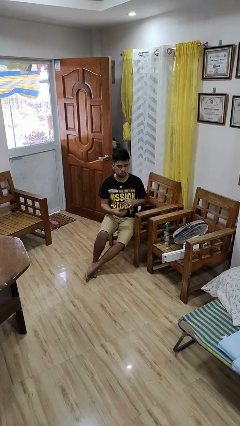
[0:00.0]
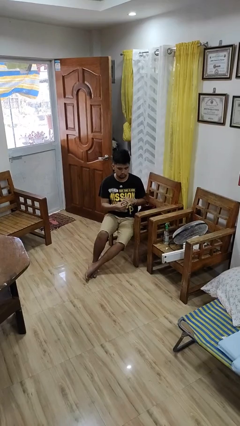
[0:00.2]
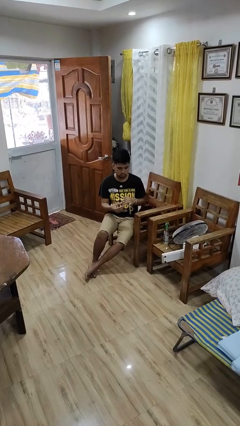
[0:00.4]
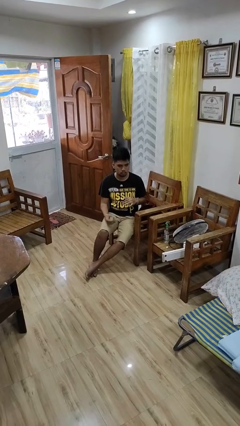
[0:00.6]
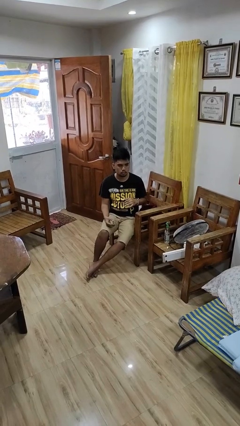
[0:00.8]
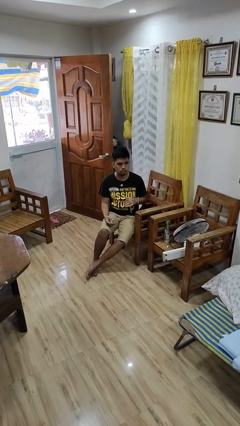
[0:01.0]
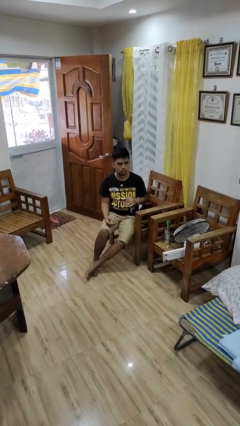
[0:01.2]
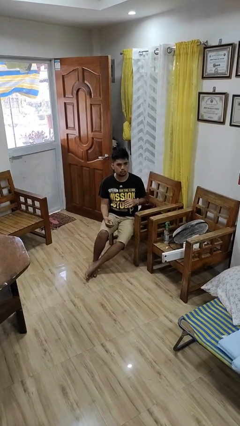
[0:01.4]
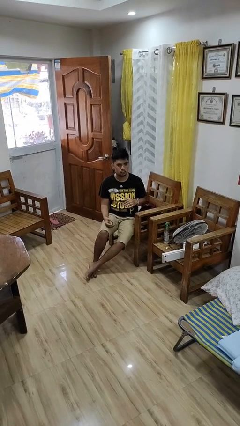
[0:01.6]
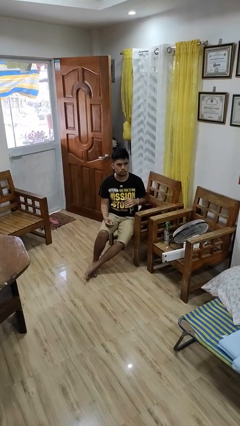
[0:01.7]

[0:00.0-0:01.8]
person takes off ring

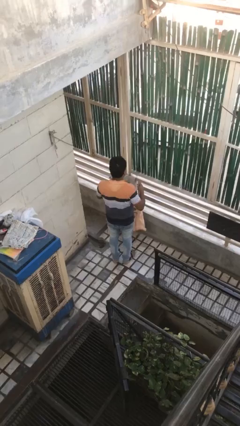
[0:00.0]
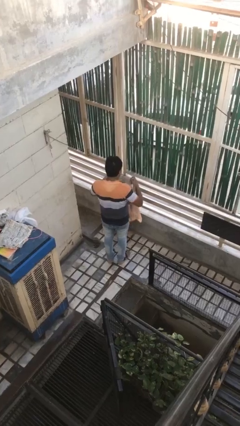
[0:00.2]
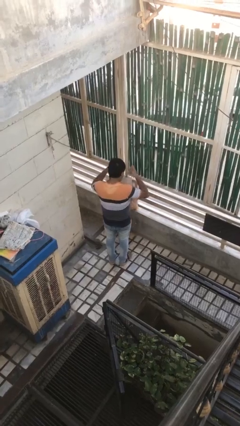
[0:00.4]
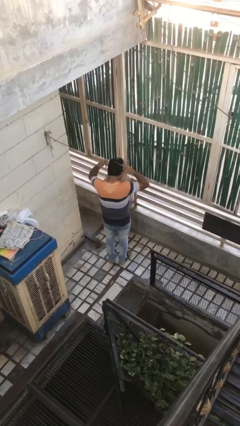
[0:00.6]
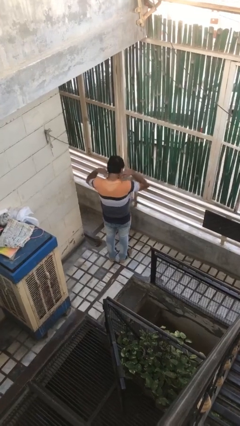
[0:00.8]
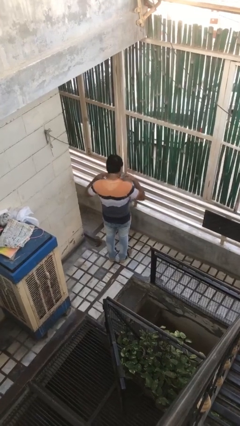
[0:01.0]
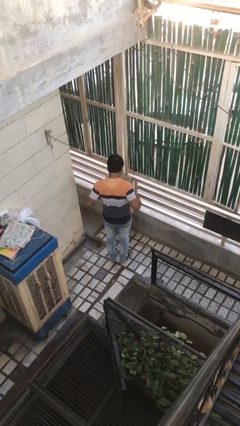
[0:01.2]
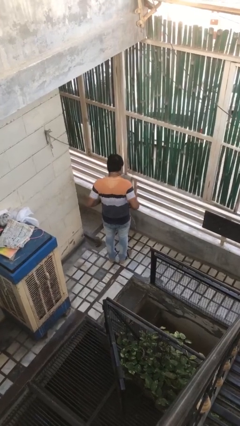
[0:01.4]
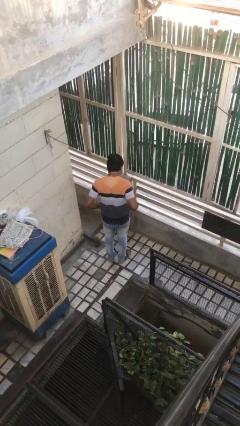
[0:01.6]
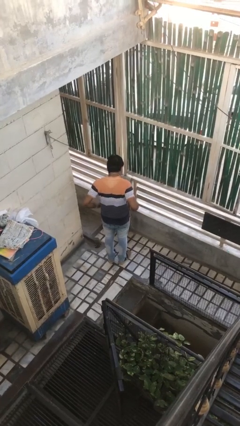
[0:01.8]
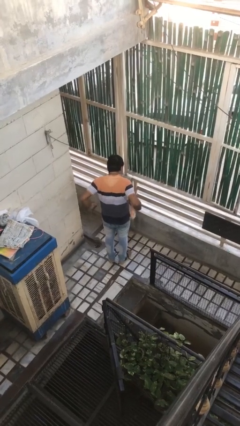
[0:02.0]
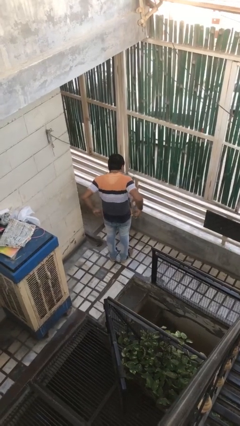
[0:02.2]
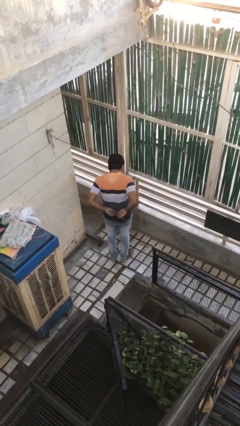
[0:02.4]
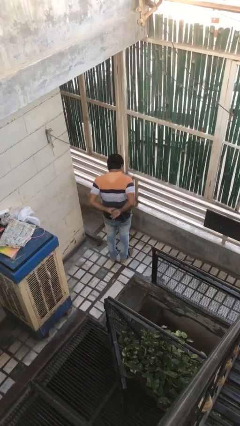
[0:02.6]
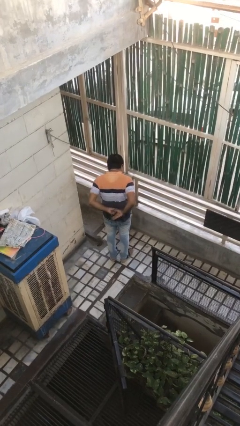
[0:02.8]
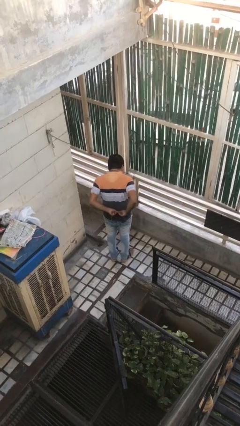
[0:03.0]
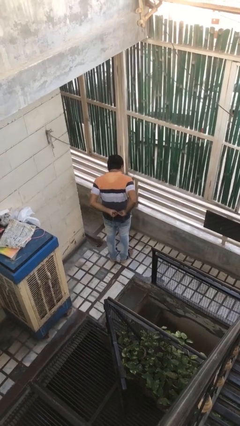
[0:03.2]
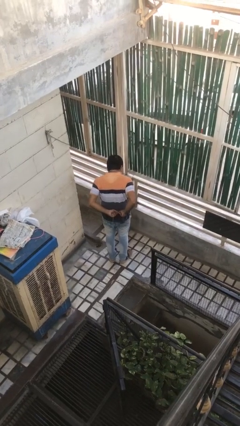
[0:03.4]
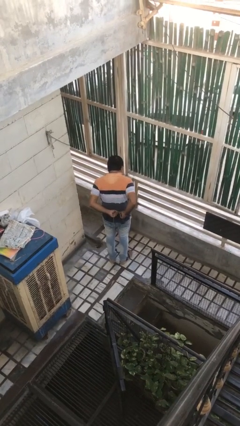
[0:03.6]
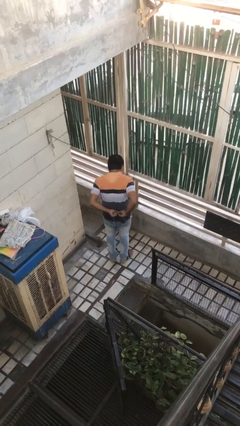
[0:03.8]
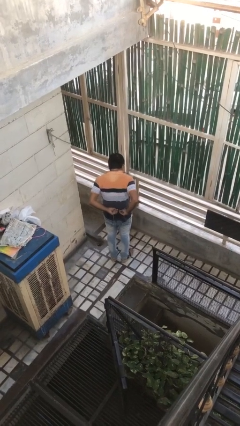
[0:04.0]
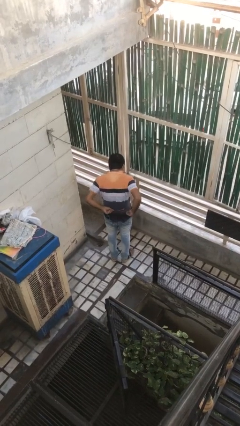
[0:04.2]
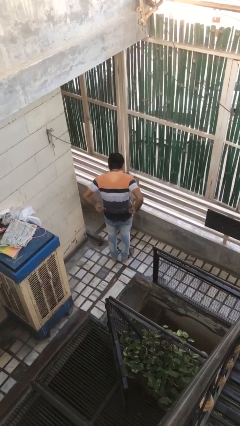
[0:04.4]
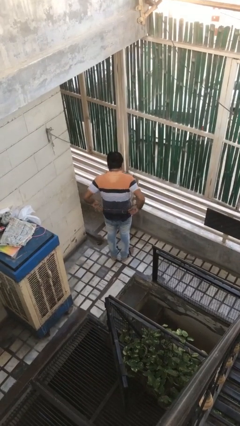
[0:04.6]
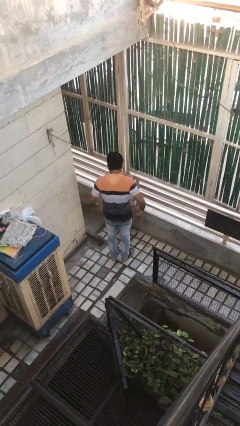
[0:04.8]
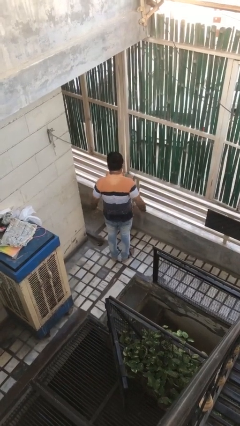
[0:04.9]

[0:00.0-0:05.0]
person puts on apron

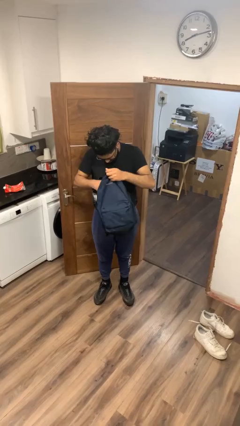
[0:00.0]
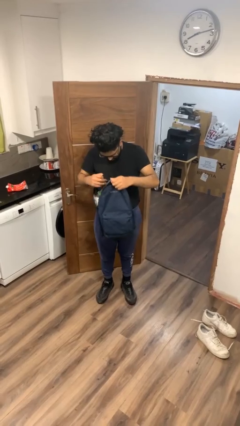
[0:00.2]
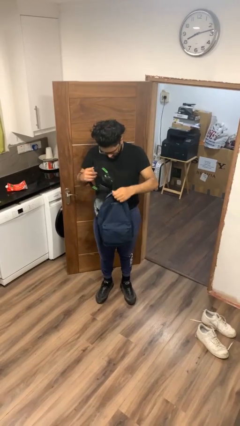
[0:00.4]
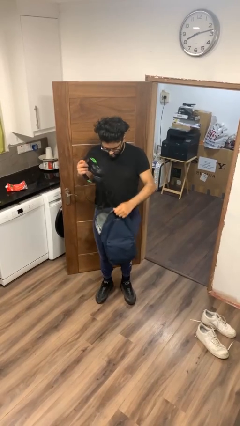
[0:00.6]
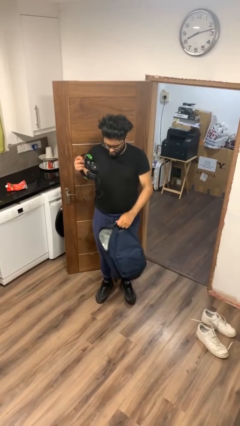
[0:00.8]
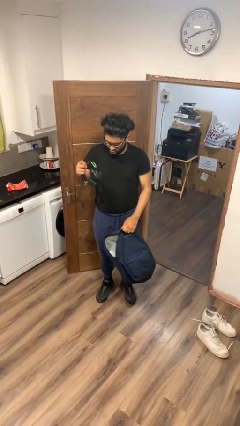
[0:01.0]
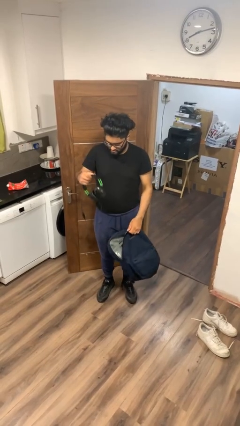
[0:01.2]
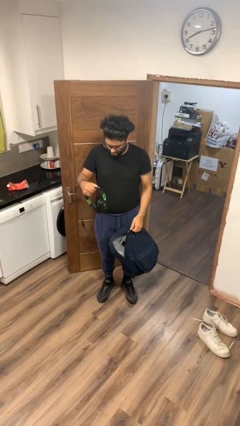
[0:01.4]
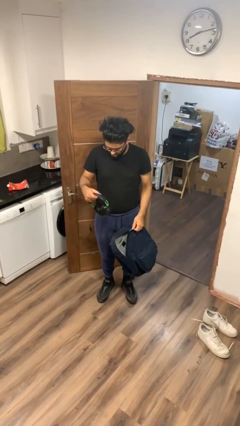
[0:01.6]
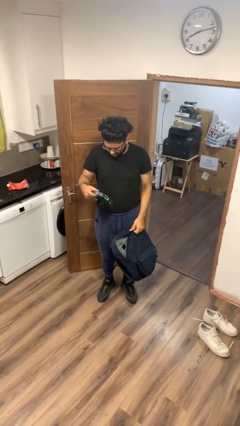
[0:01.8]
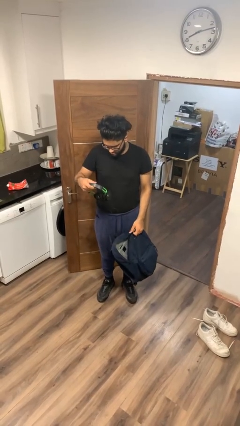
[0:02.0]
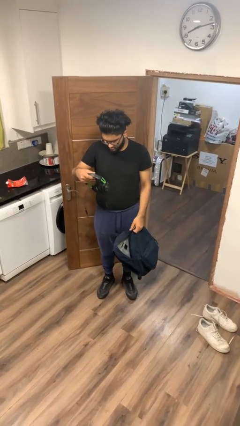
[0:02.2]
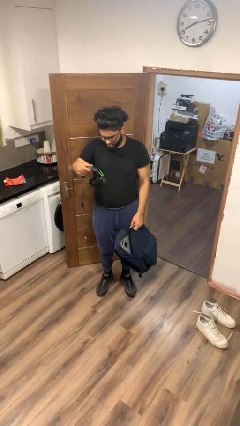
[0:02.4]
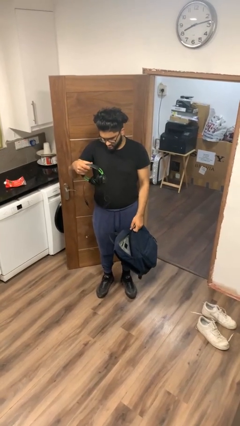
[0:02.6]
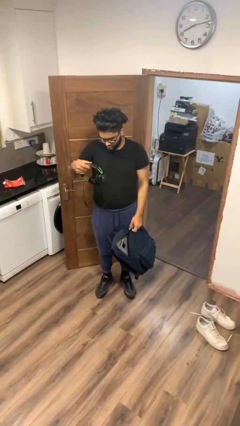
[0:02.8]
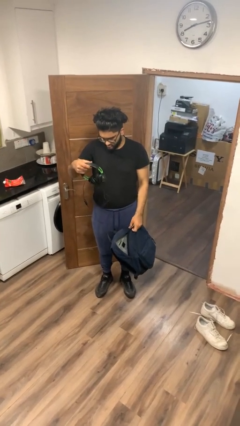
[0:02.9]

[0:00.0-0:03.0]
person takes object from backpack

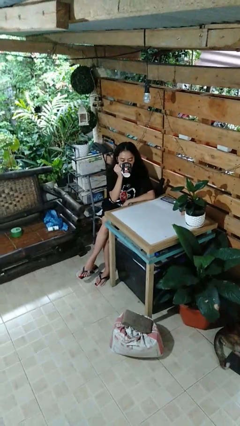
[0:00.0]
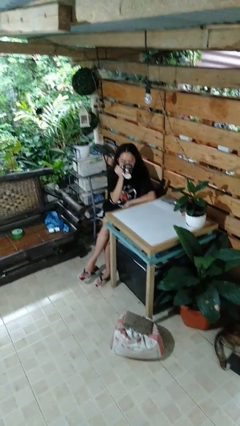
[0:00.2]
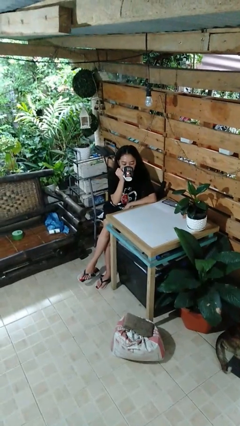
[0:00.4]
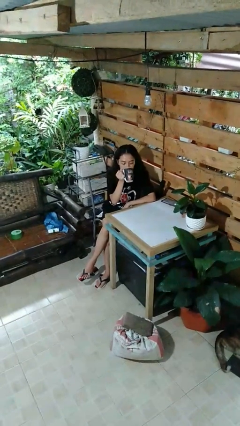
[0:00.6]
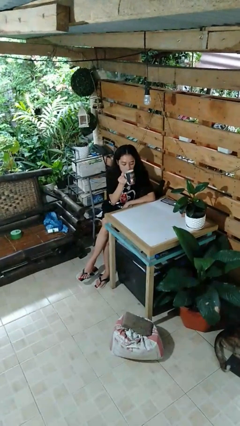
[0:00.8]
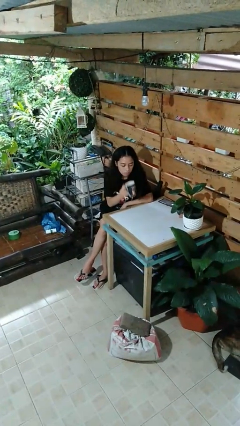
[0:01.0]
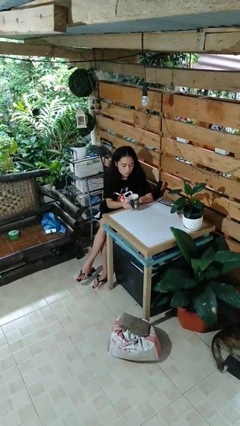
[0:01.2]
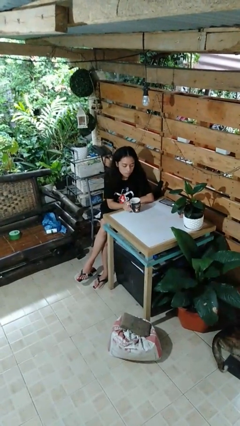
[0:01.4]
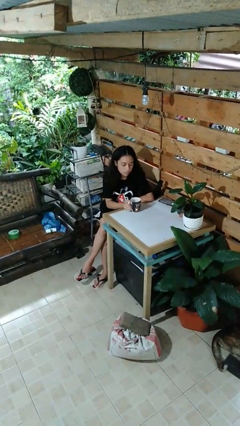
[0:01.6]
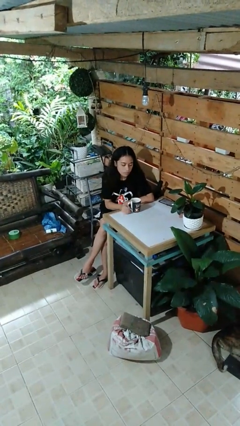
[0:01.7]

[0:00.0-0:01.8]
person puts down object on table

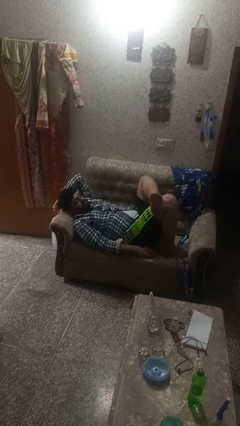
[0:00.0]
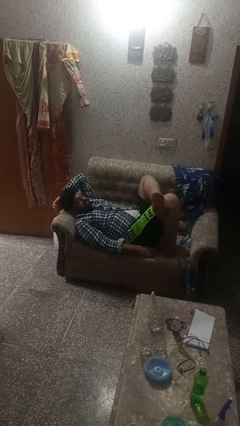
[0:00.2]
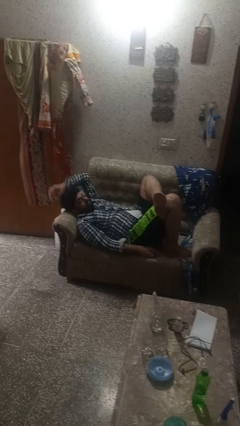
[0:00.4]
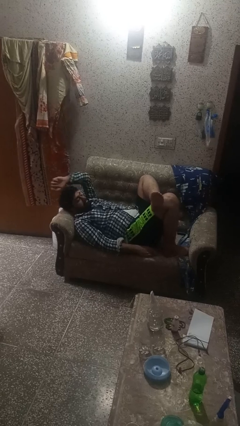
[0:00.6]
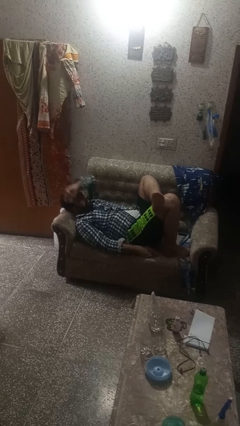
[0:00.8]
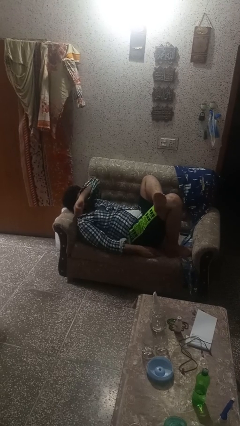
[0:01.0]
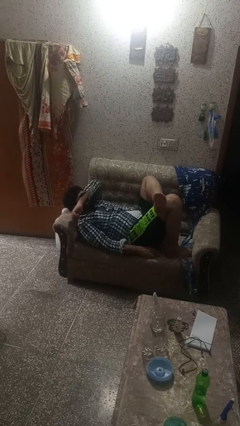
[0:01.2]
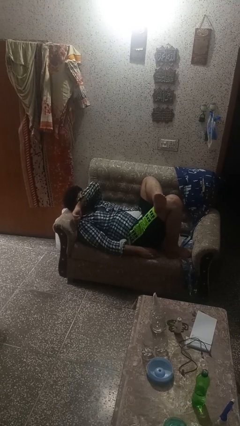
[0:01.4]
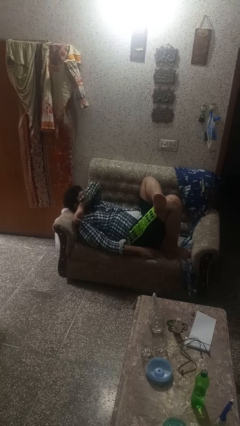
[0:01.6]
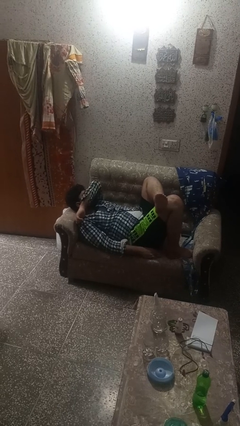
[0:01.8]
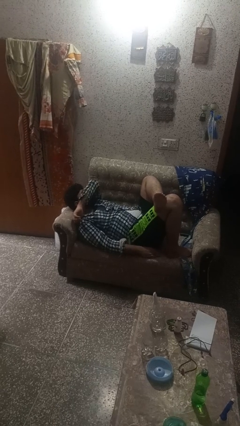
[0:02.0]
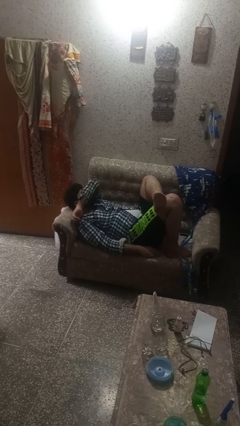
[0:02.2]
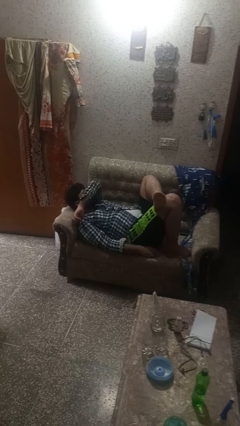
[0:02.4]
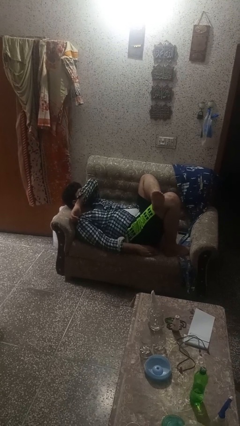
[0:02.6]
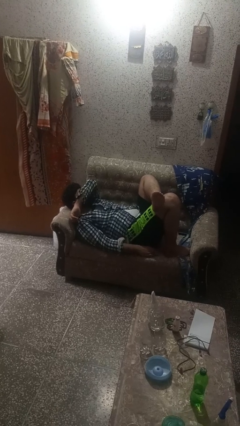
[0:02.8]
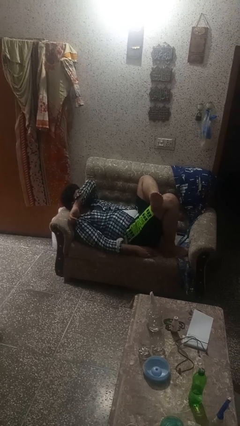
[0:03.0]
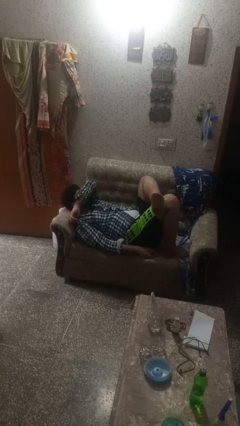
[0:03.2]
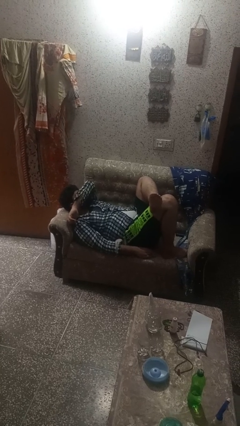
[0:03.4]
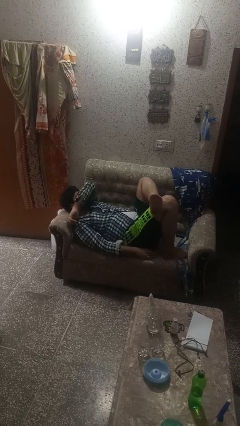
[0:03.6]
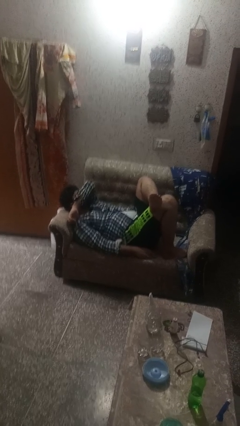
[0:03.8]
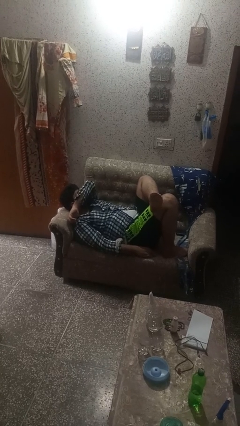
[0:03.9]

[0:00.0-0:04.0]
person sneezes into arm

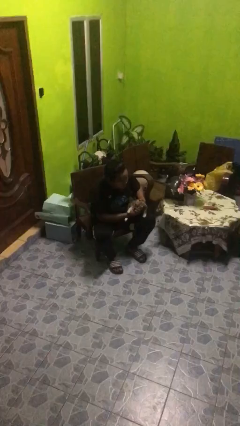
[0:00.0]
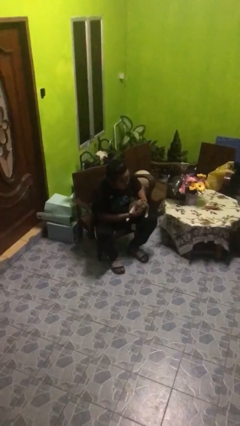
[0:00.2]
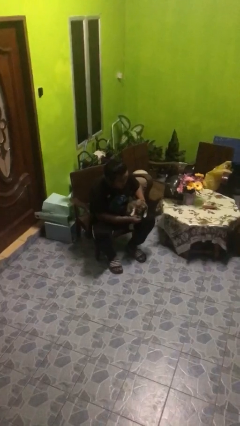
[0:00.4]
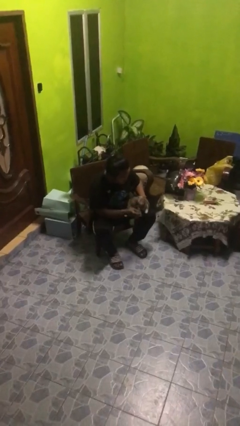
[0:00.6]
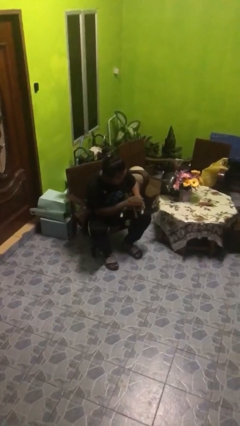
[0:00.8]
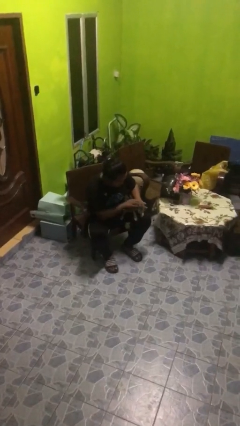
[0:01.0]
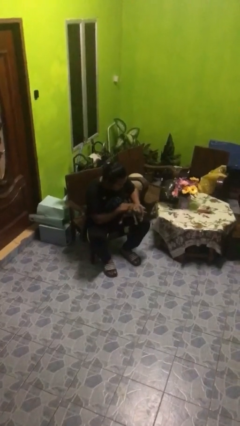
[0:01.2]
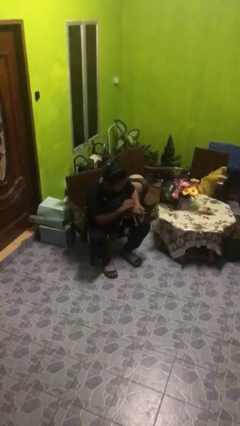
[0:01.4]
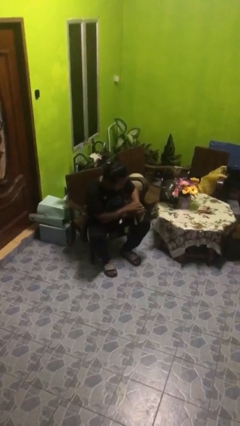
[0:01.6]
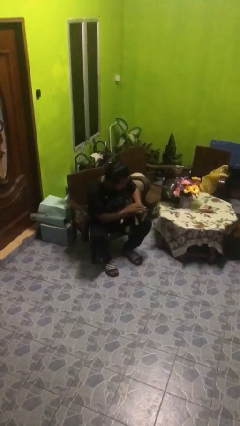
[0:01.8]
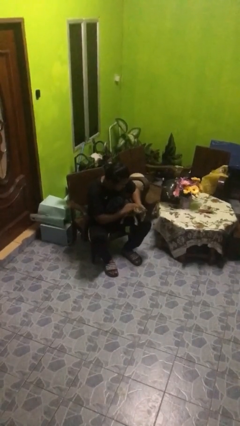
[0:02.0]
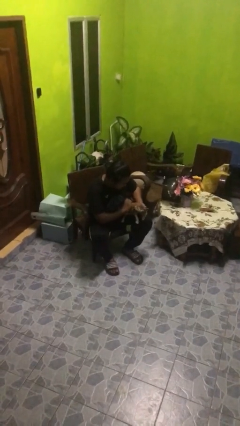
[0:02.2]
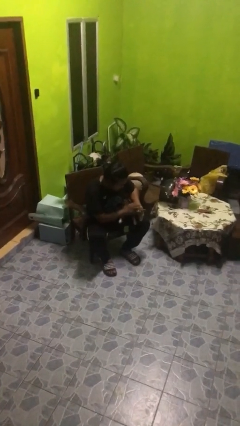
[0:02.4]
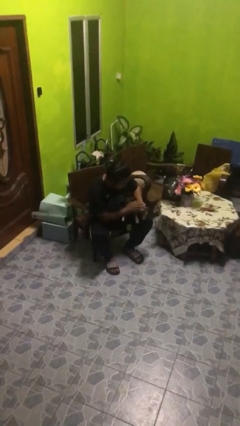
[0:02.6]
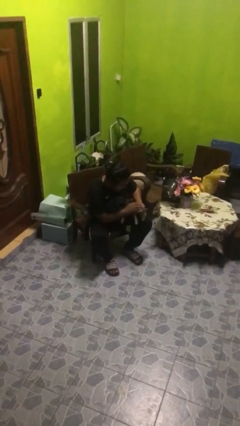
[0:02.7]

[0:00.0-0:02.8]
person pets cat
